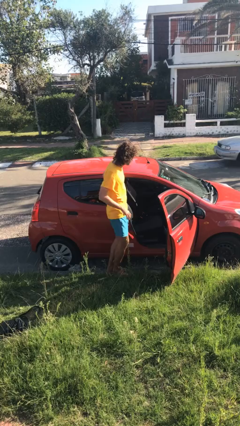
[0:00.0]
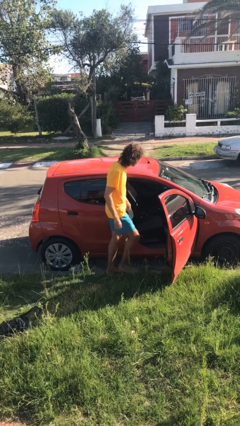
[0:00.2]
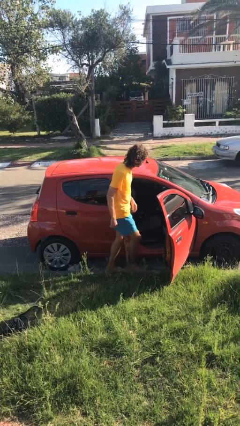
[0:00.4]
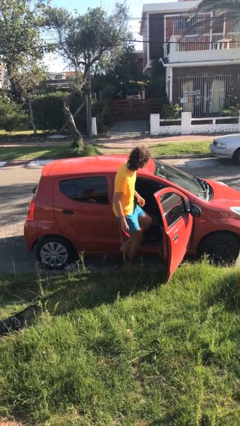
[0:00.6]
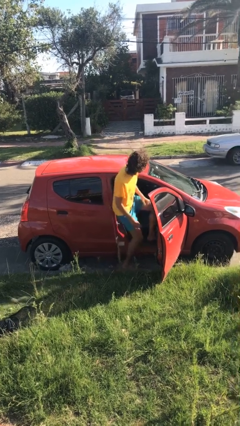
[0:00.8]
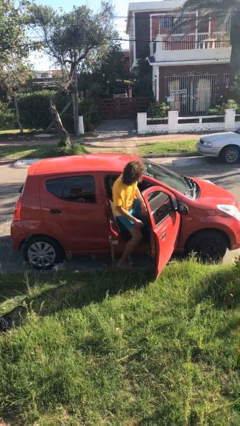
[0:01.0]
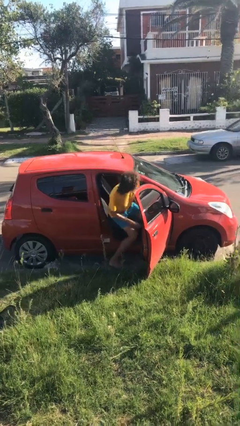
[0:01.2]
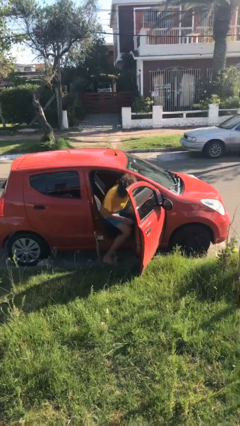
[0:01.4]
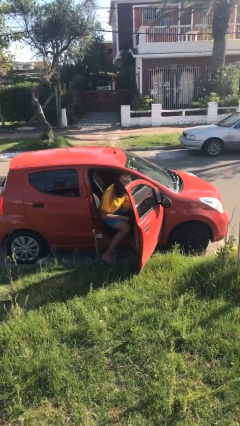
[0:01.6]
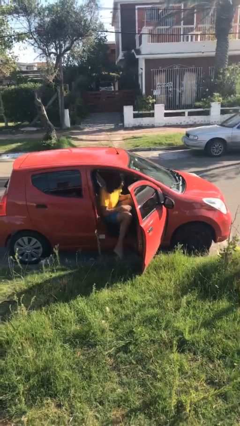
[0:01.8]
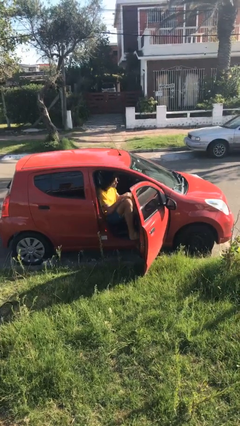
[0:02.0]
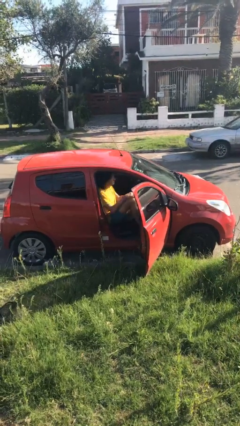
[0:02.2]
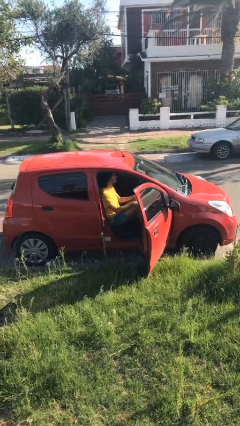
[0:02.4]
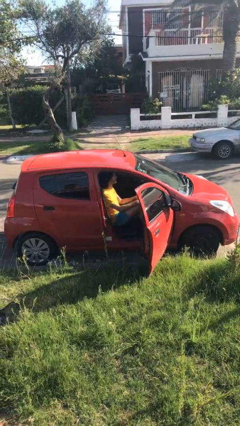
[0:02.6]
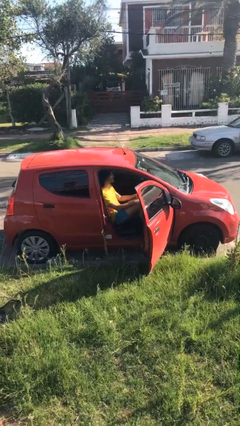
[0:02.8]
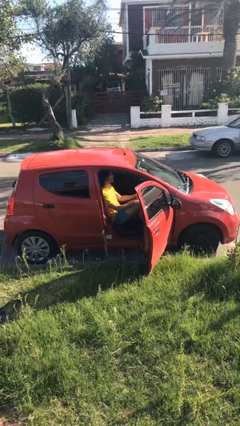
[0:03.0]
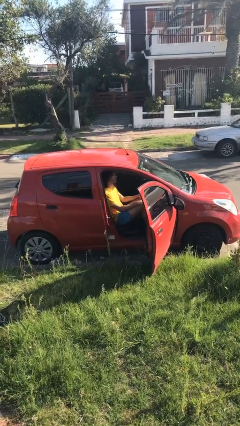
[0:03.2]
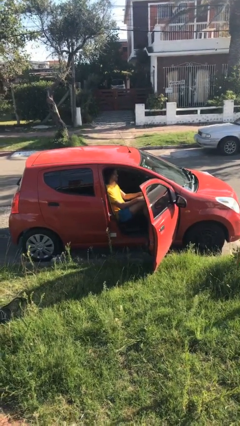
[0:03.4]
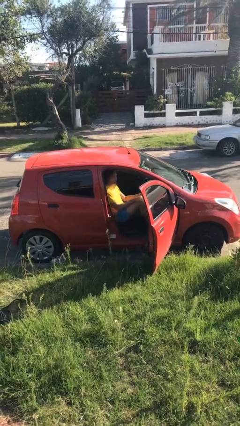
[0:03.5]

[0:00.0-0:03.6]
person enters car

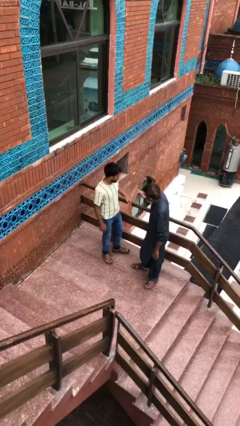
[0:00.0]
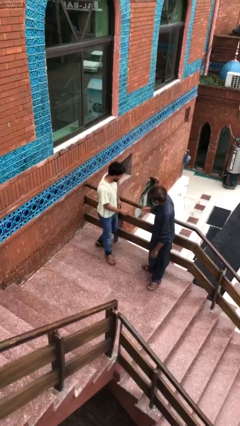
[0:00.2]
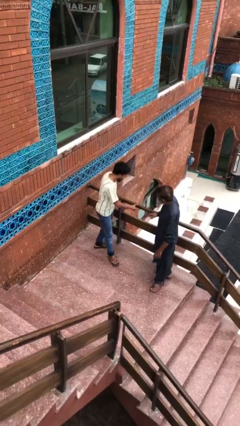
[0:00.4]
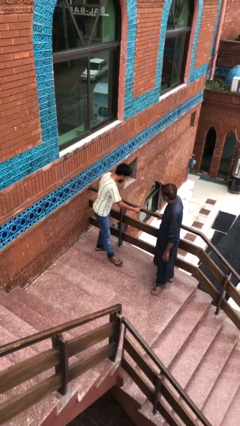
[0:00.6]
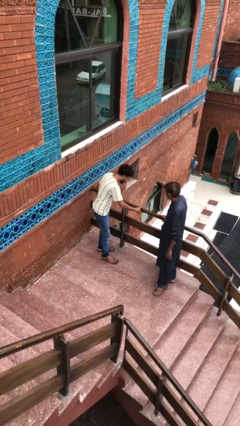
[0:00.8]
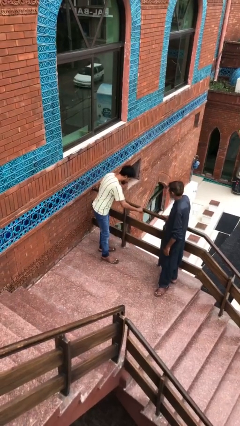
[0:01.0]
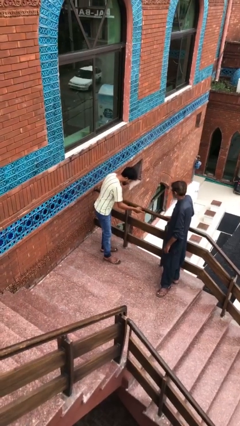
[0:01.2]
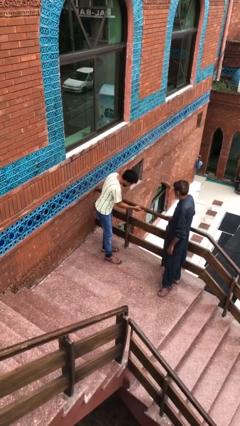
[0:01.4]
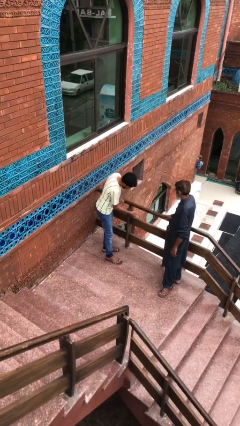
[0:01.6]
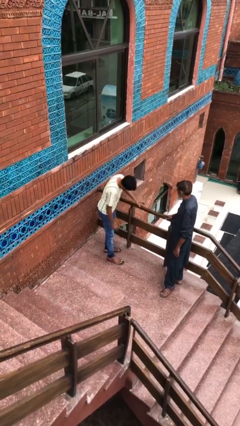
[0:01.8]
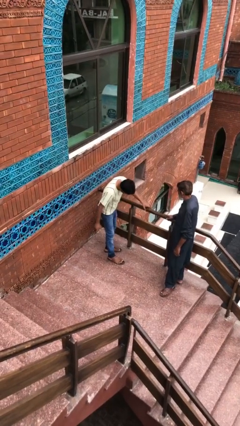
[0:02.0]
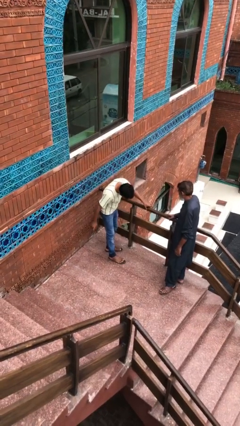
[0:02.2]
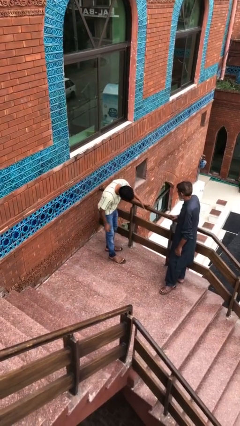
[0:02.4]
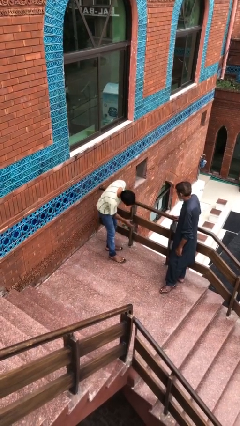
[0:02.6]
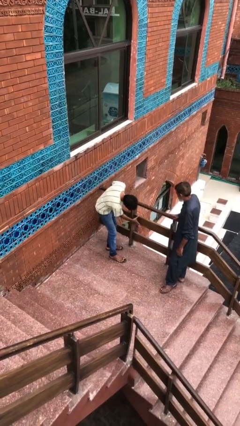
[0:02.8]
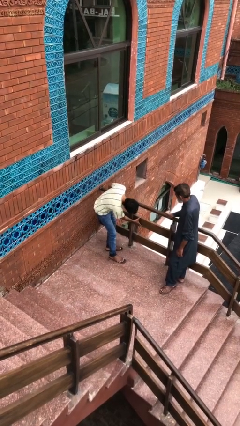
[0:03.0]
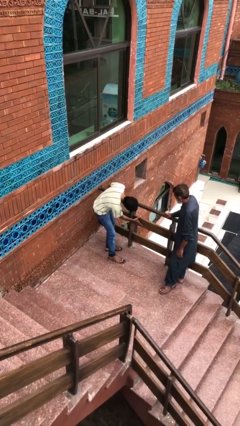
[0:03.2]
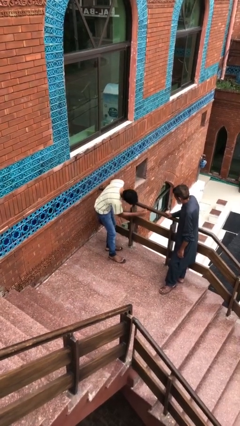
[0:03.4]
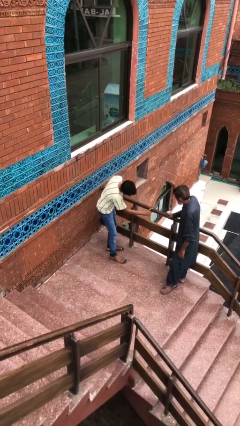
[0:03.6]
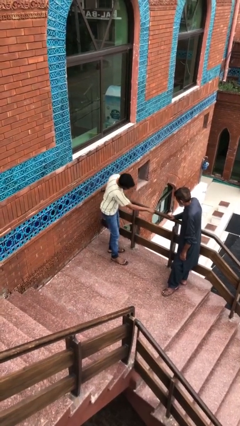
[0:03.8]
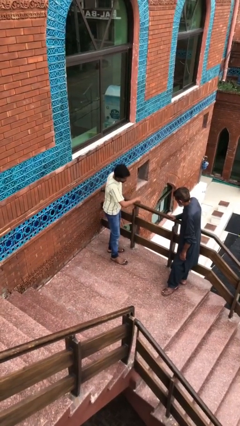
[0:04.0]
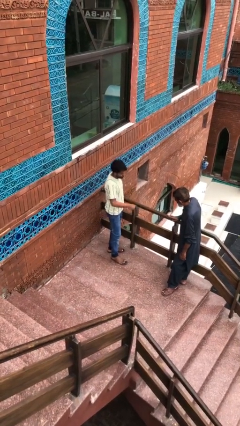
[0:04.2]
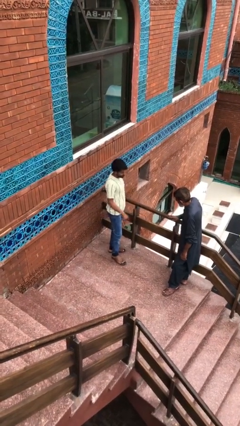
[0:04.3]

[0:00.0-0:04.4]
person talks to person

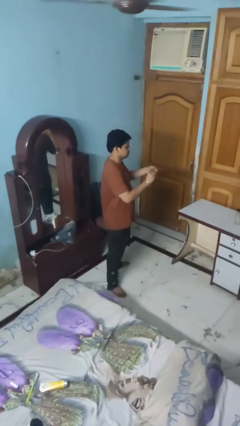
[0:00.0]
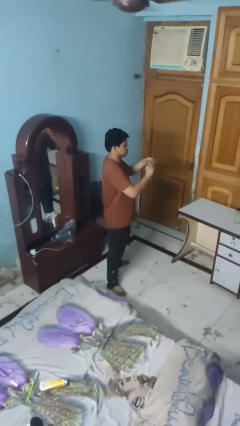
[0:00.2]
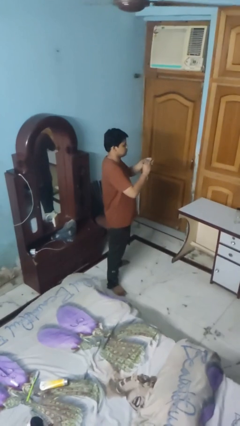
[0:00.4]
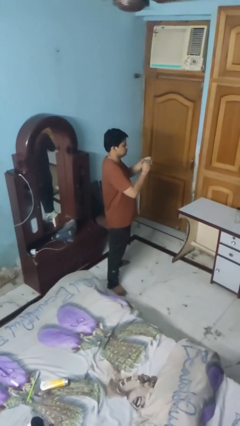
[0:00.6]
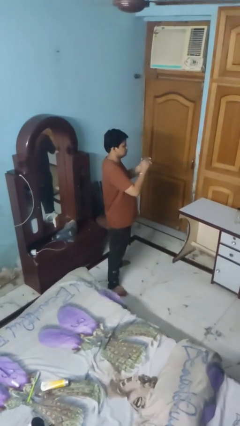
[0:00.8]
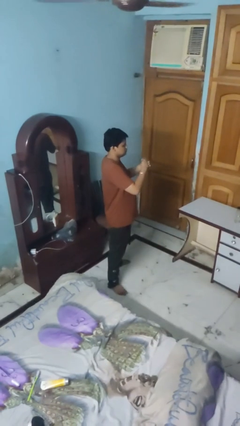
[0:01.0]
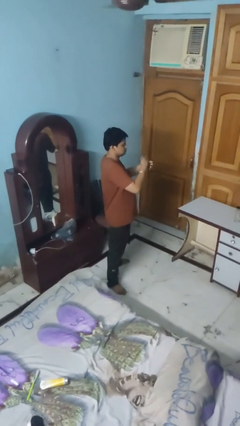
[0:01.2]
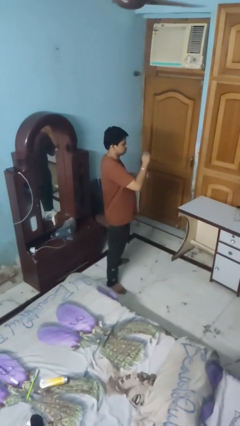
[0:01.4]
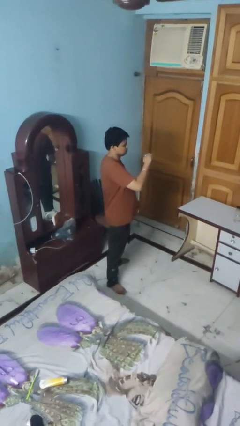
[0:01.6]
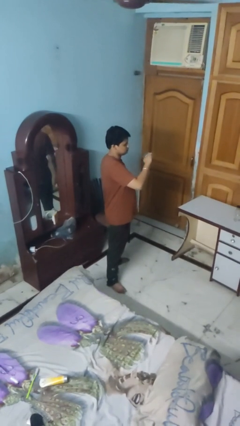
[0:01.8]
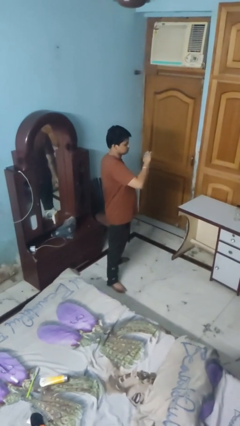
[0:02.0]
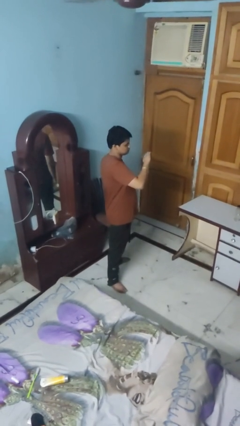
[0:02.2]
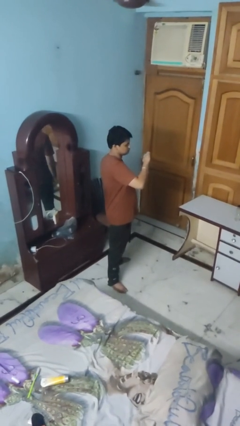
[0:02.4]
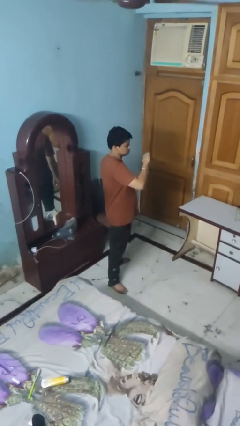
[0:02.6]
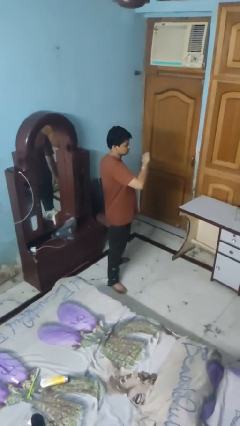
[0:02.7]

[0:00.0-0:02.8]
person puts on wristwatch

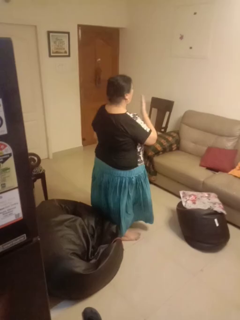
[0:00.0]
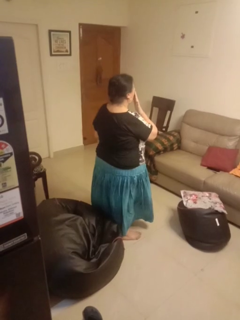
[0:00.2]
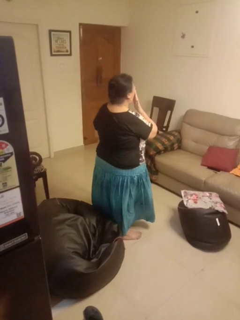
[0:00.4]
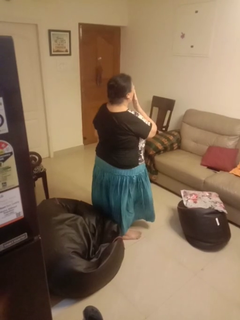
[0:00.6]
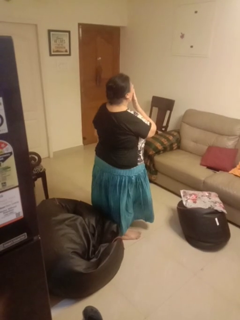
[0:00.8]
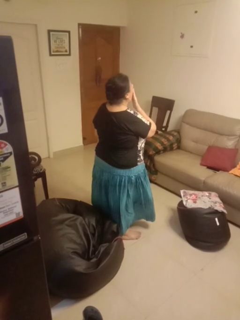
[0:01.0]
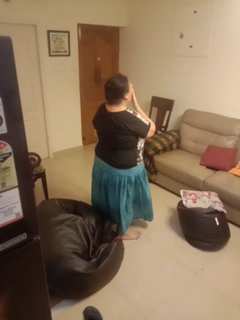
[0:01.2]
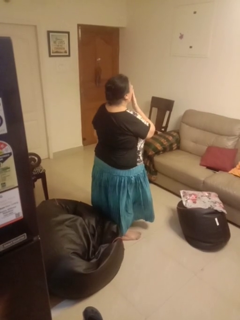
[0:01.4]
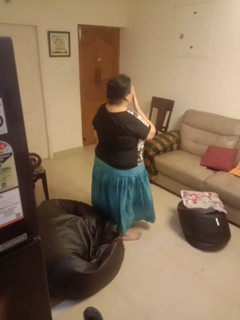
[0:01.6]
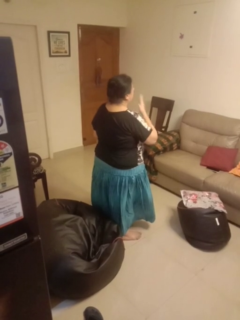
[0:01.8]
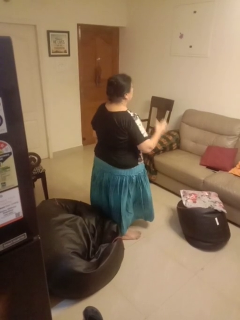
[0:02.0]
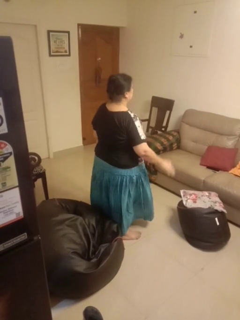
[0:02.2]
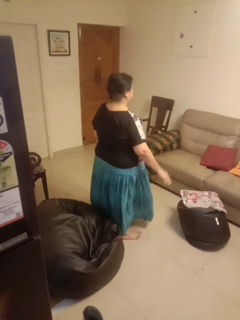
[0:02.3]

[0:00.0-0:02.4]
person yawns

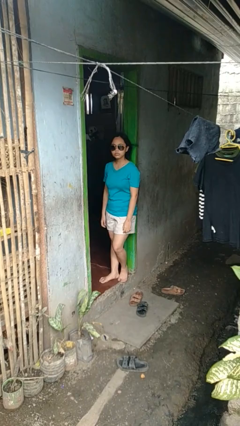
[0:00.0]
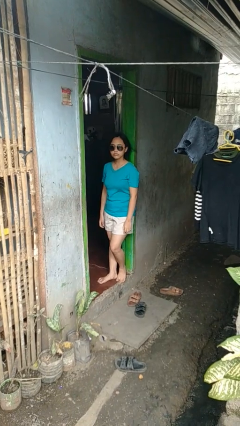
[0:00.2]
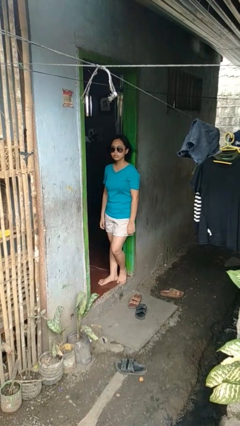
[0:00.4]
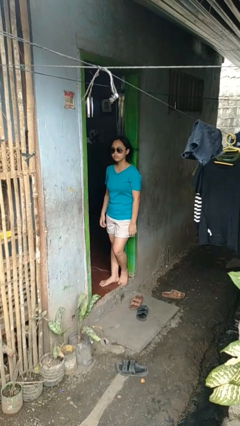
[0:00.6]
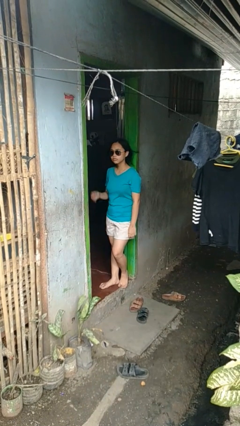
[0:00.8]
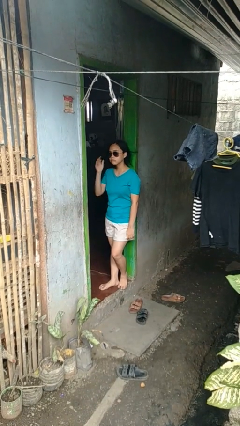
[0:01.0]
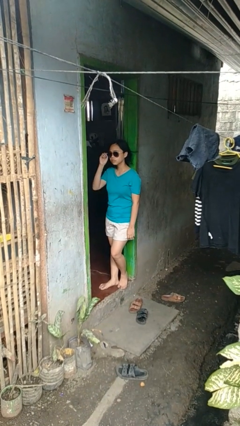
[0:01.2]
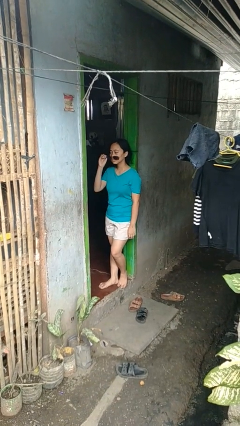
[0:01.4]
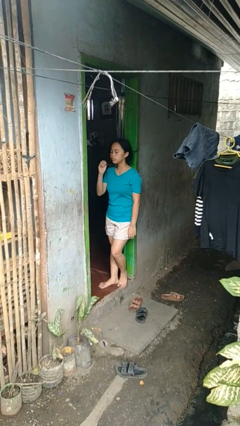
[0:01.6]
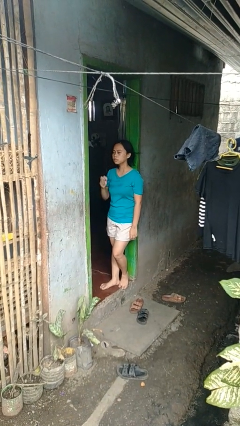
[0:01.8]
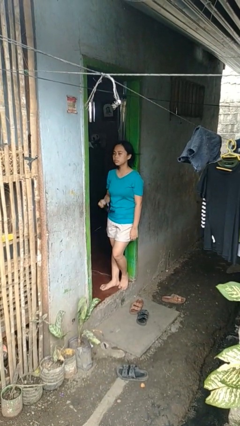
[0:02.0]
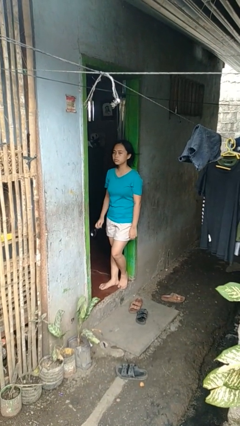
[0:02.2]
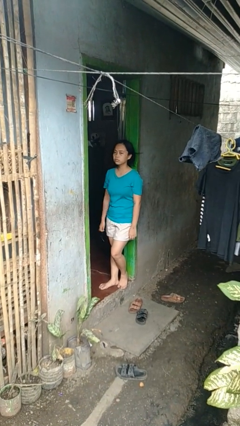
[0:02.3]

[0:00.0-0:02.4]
person takes off sunglasses

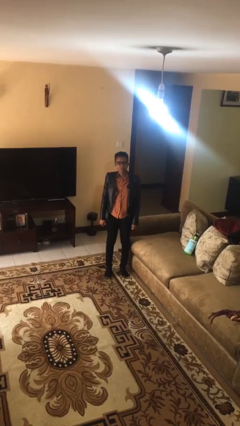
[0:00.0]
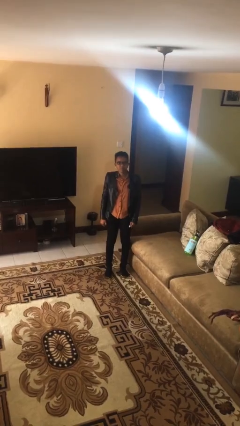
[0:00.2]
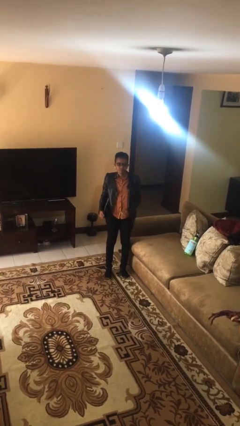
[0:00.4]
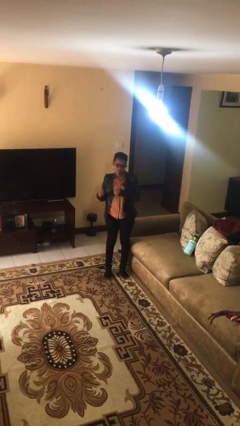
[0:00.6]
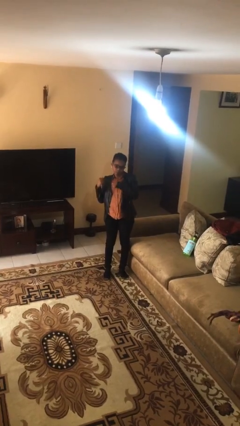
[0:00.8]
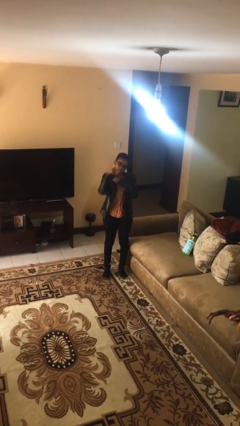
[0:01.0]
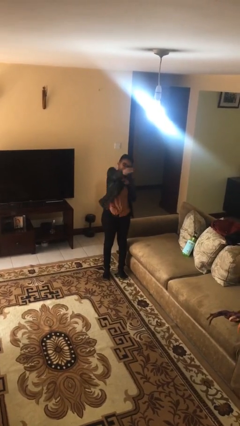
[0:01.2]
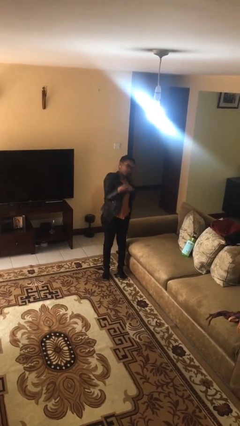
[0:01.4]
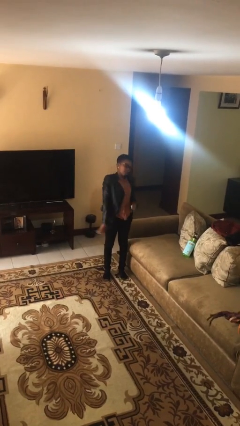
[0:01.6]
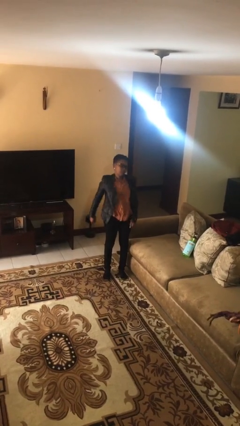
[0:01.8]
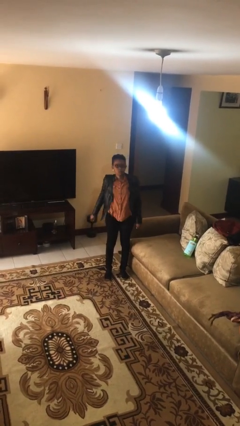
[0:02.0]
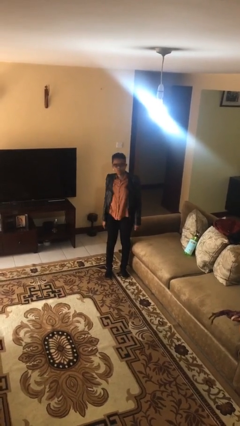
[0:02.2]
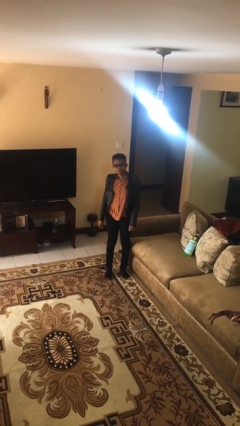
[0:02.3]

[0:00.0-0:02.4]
person punches
